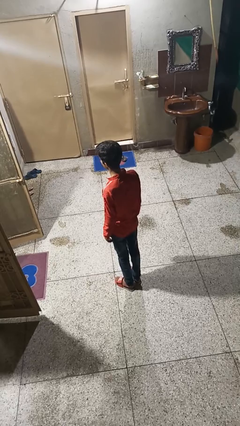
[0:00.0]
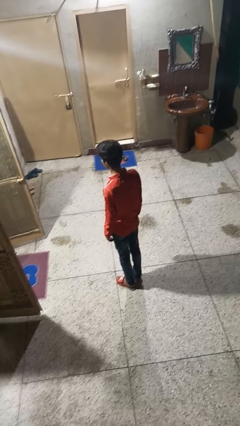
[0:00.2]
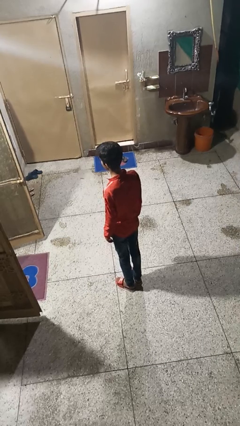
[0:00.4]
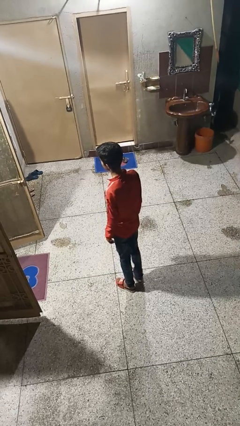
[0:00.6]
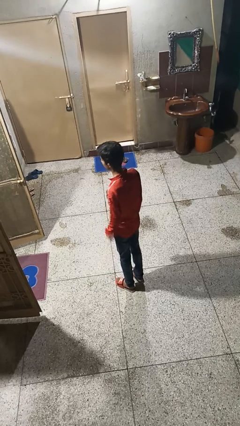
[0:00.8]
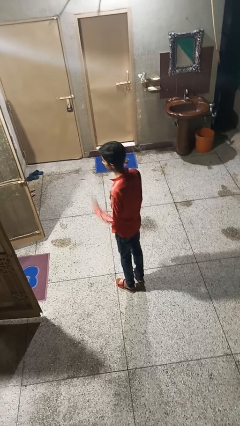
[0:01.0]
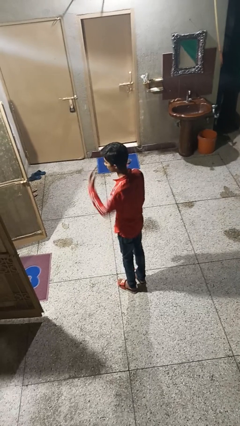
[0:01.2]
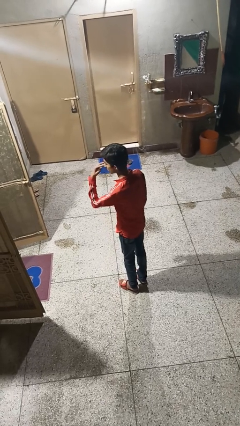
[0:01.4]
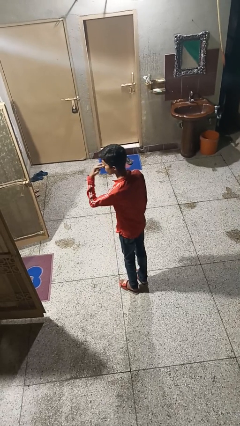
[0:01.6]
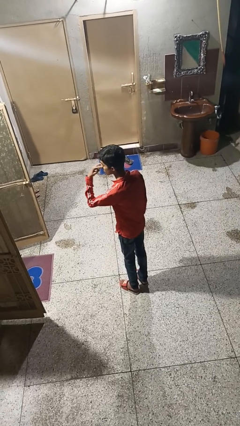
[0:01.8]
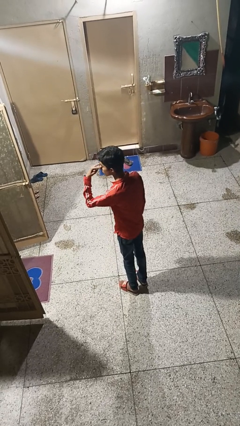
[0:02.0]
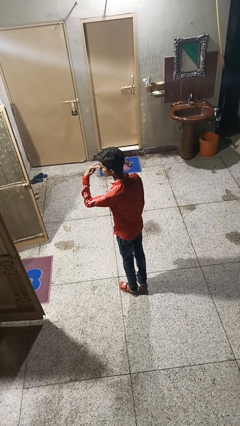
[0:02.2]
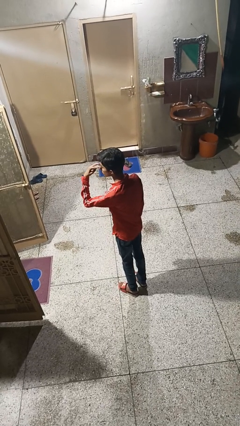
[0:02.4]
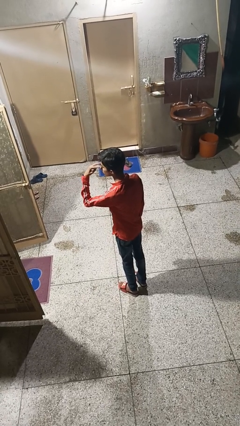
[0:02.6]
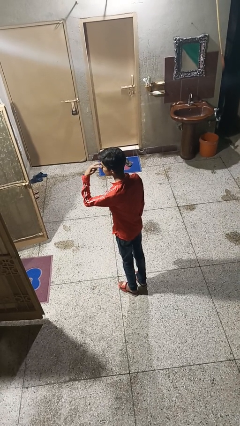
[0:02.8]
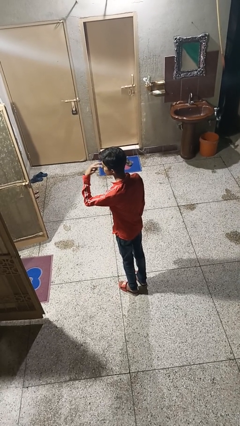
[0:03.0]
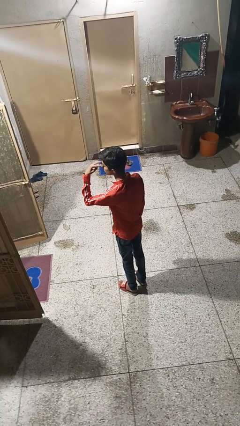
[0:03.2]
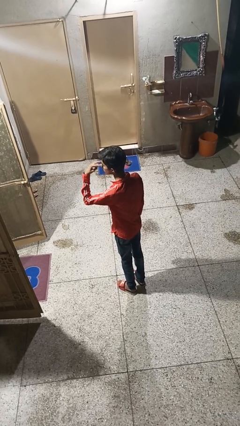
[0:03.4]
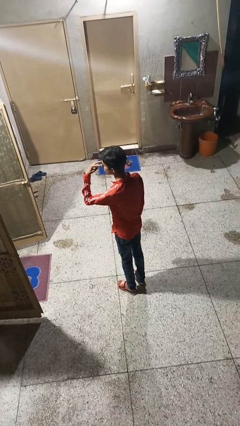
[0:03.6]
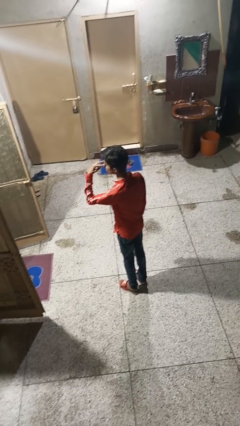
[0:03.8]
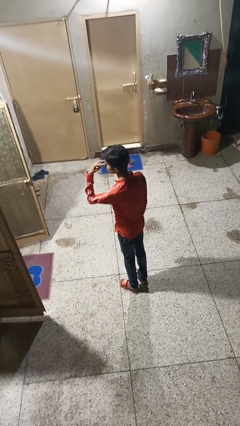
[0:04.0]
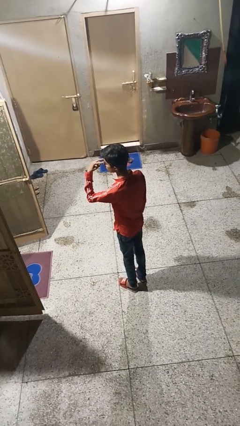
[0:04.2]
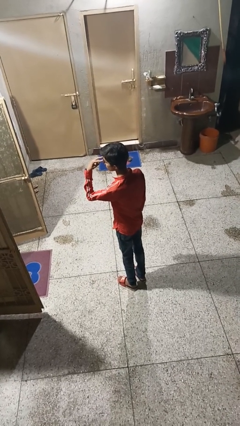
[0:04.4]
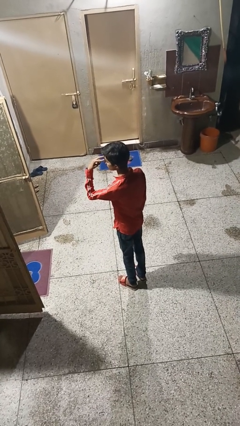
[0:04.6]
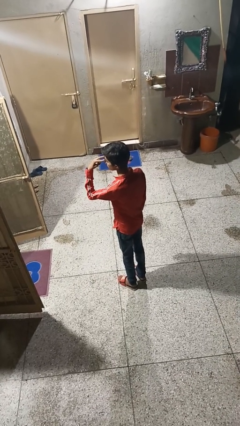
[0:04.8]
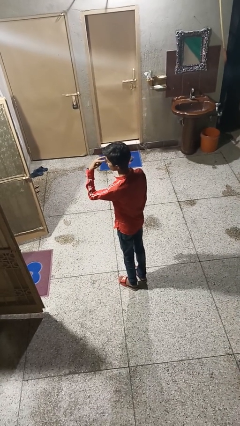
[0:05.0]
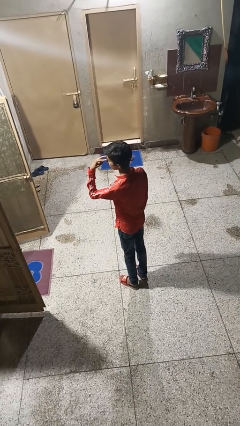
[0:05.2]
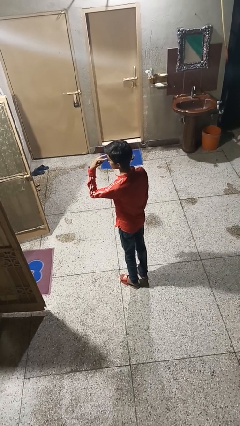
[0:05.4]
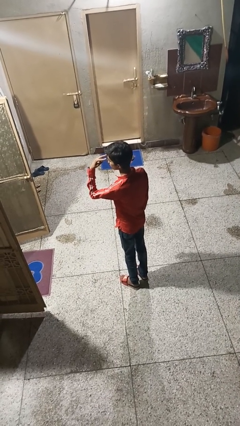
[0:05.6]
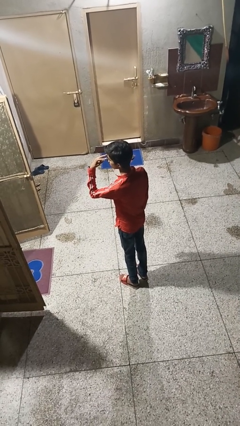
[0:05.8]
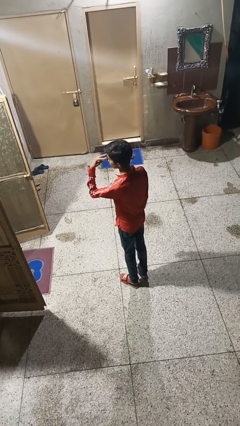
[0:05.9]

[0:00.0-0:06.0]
person gestures watch closely

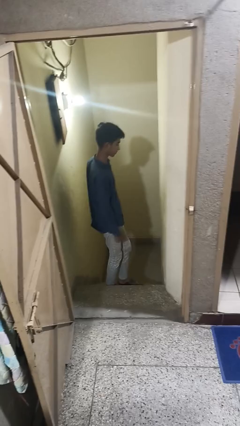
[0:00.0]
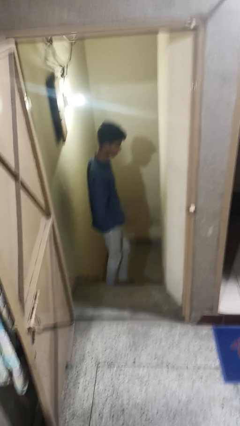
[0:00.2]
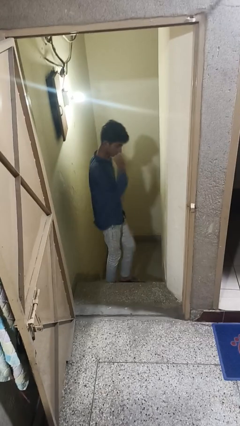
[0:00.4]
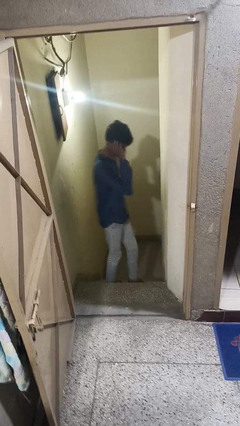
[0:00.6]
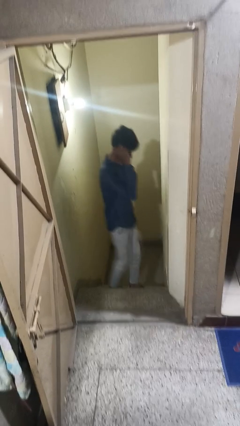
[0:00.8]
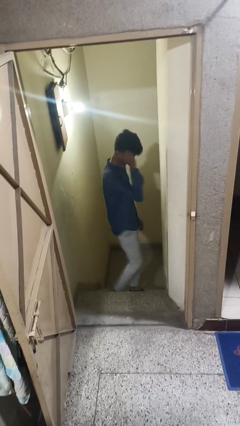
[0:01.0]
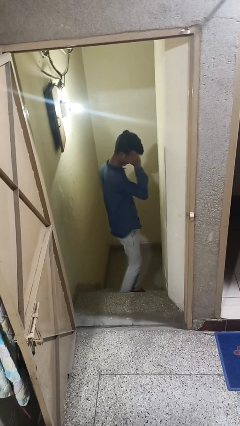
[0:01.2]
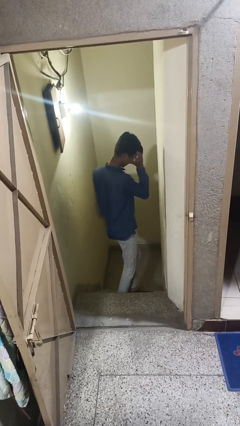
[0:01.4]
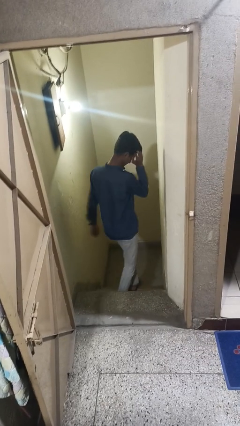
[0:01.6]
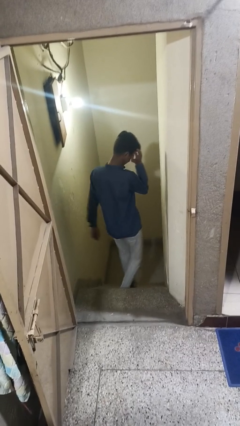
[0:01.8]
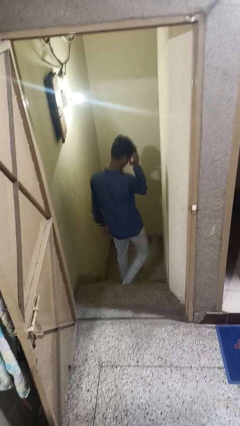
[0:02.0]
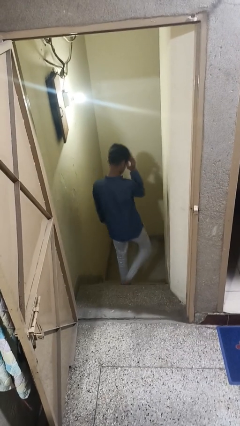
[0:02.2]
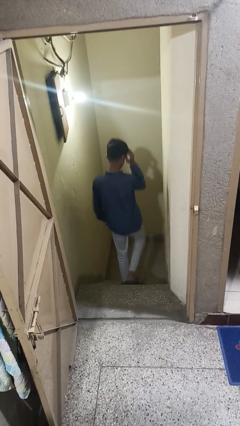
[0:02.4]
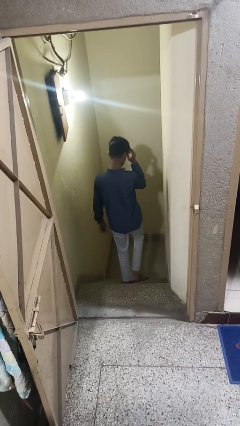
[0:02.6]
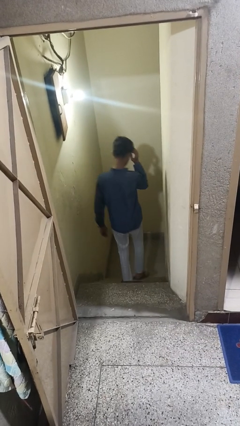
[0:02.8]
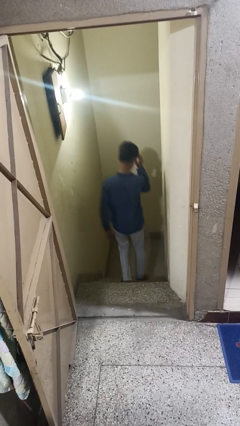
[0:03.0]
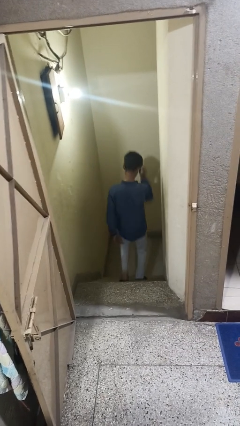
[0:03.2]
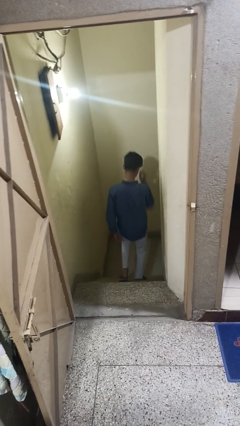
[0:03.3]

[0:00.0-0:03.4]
person climbs down stairs

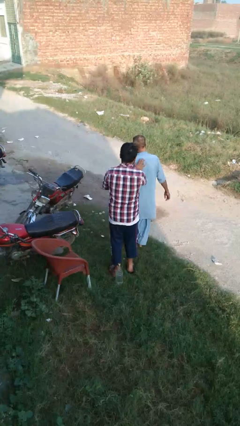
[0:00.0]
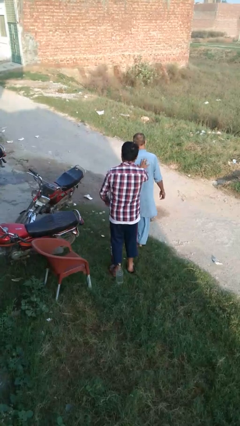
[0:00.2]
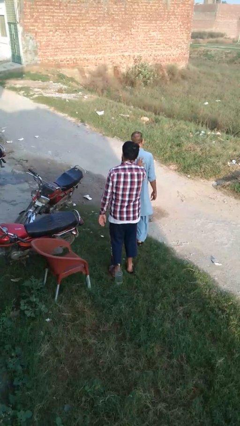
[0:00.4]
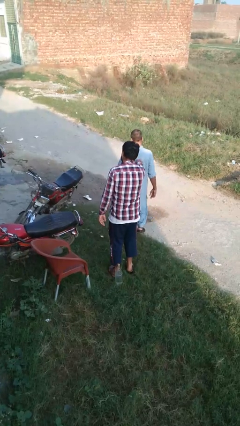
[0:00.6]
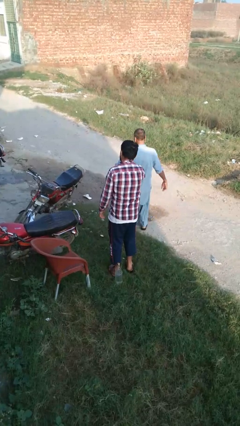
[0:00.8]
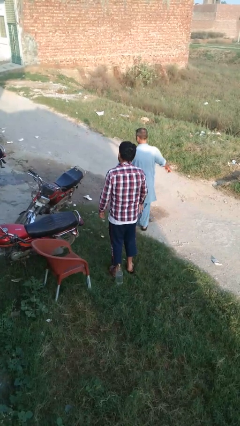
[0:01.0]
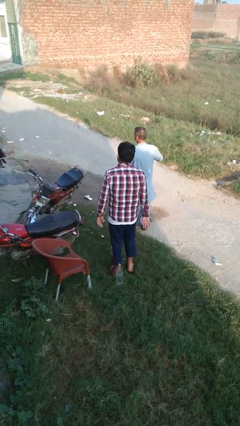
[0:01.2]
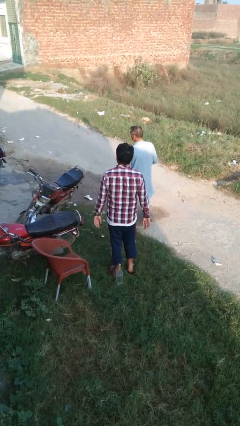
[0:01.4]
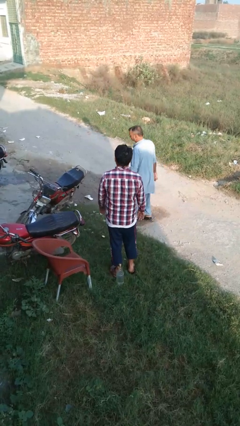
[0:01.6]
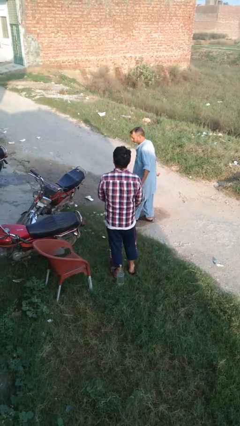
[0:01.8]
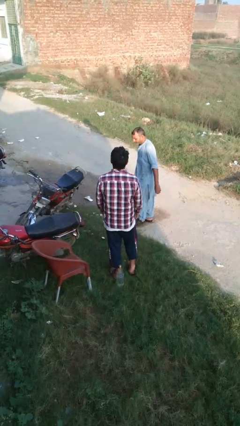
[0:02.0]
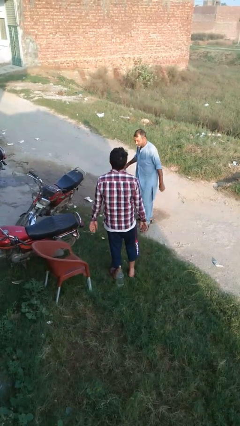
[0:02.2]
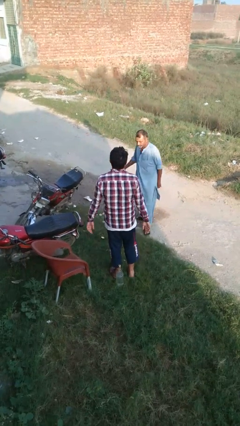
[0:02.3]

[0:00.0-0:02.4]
person spins person around

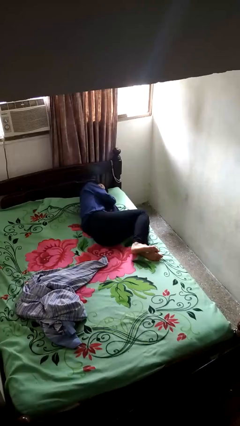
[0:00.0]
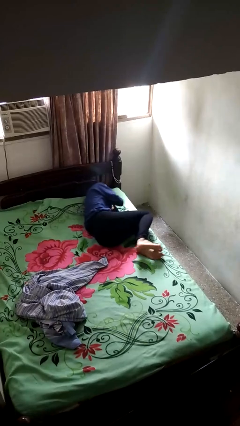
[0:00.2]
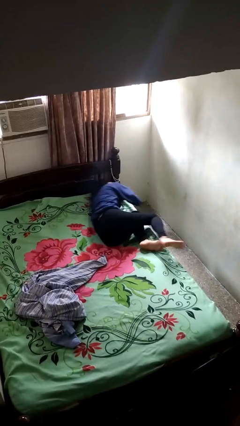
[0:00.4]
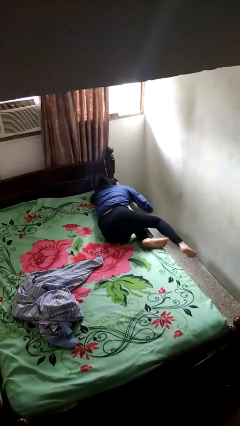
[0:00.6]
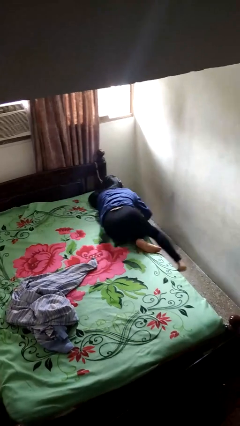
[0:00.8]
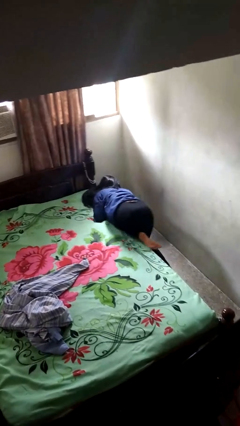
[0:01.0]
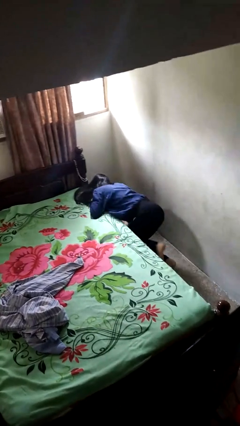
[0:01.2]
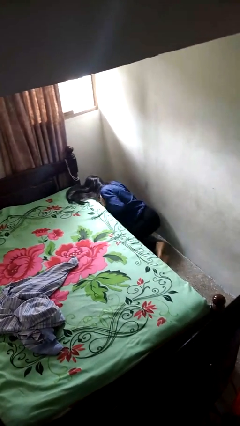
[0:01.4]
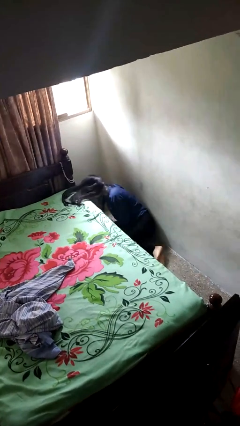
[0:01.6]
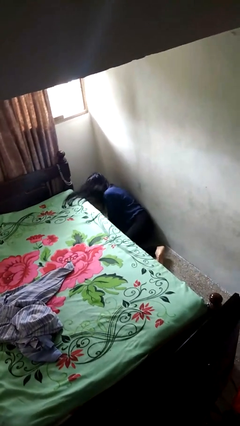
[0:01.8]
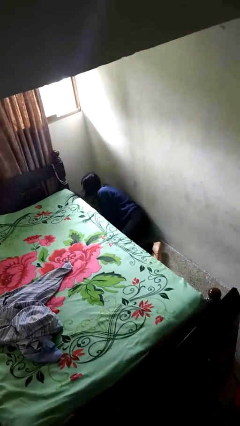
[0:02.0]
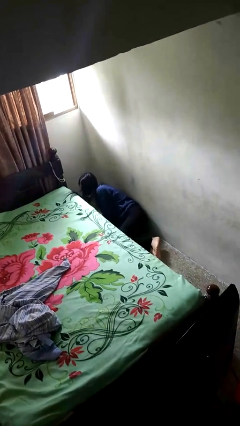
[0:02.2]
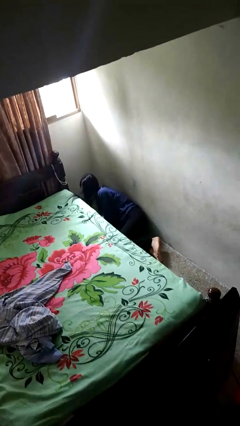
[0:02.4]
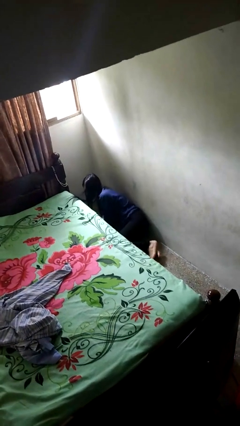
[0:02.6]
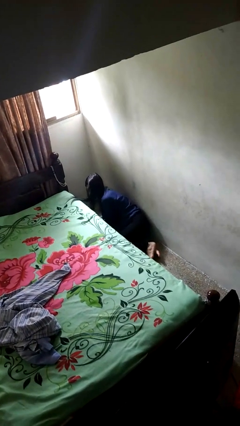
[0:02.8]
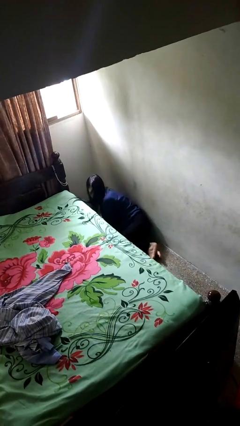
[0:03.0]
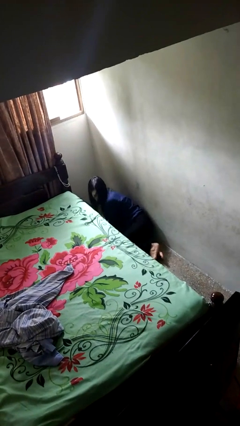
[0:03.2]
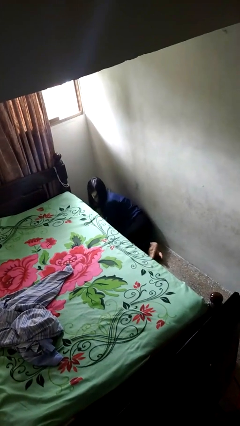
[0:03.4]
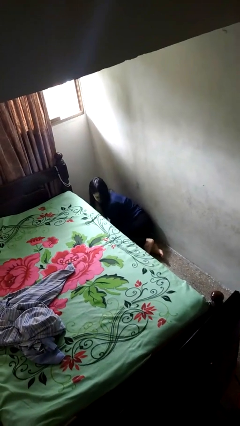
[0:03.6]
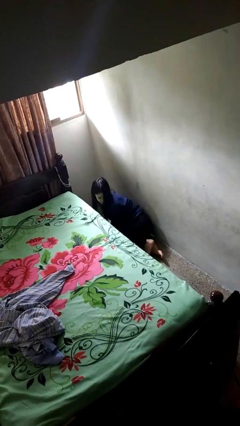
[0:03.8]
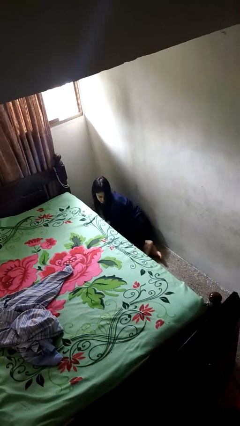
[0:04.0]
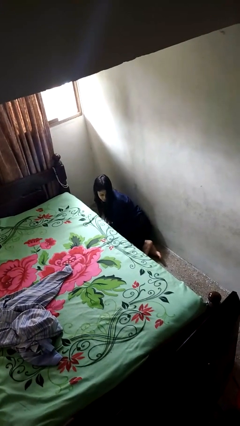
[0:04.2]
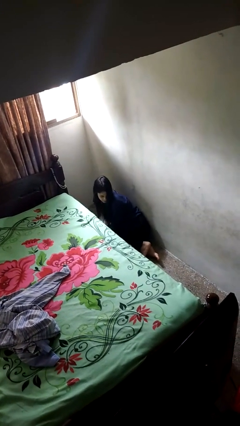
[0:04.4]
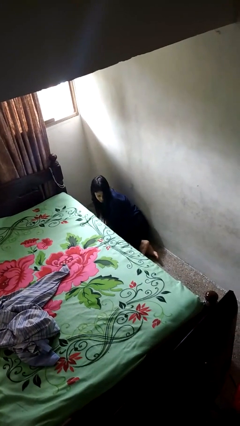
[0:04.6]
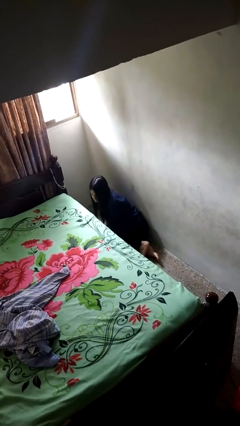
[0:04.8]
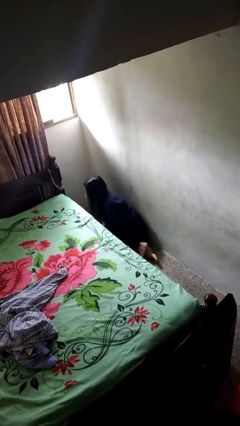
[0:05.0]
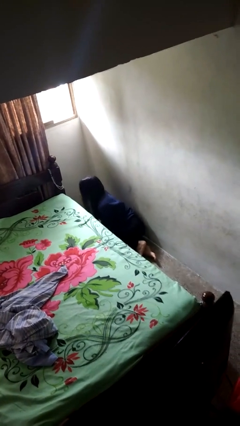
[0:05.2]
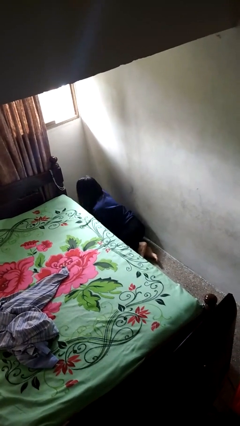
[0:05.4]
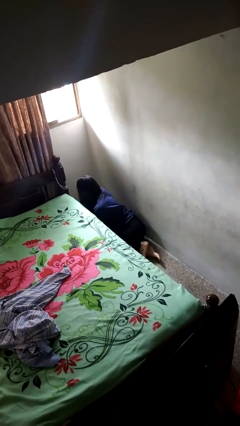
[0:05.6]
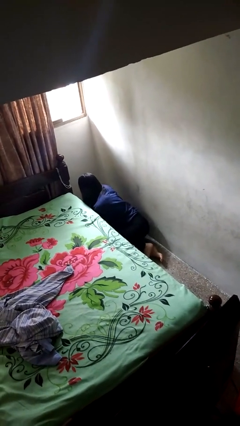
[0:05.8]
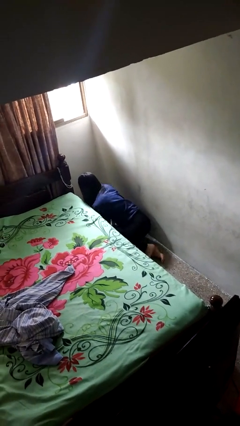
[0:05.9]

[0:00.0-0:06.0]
person falls from bed
